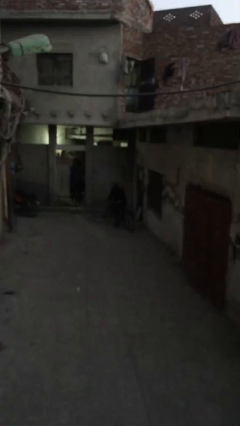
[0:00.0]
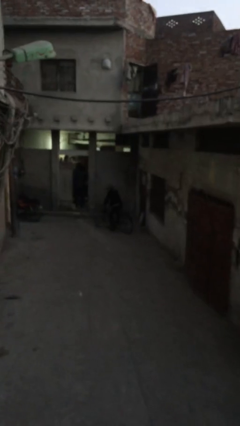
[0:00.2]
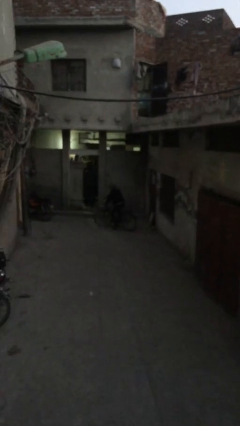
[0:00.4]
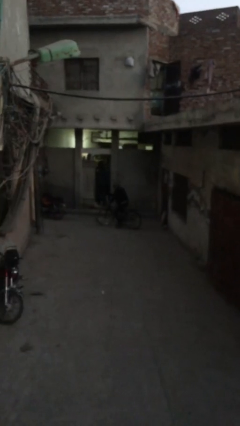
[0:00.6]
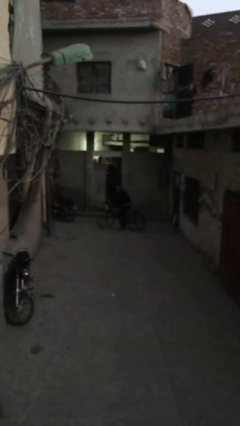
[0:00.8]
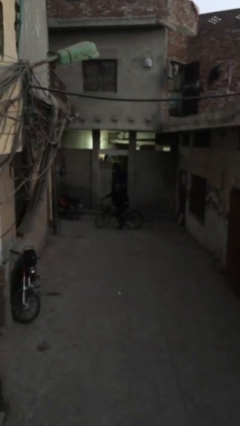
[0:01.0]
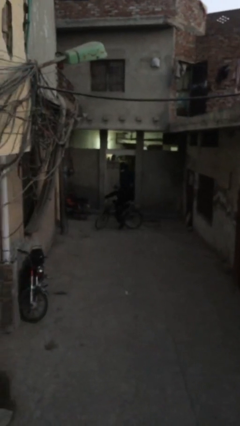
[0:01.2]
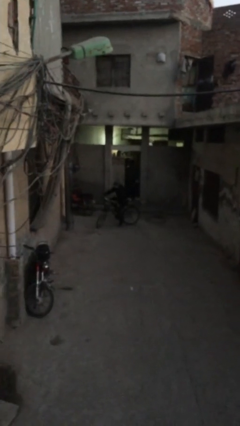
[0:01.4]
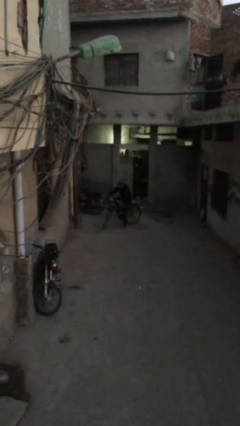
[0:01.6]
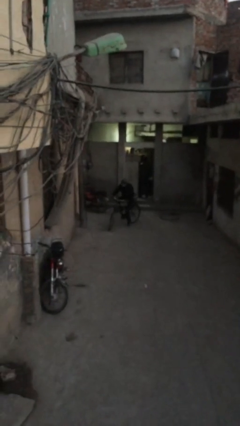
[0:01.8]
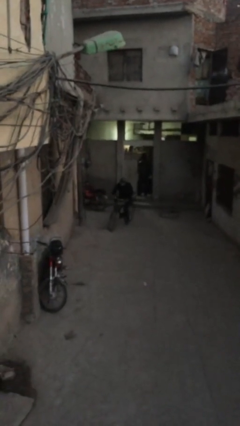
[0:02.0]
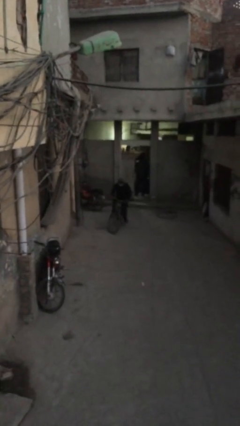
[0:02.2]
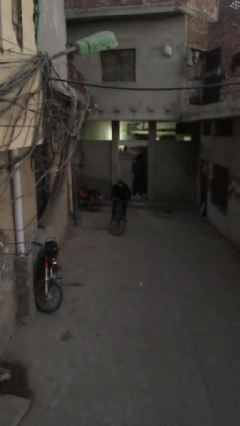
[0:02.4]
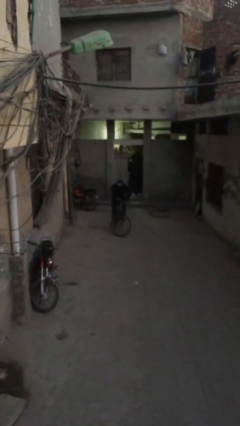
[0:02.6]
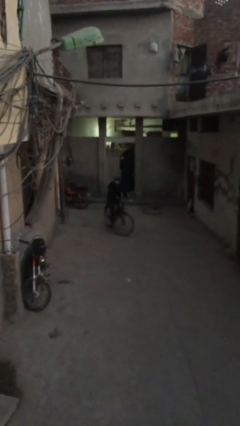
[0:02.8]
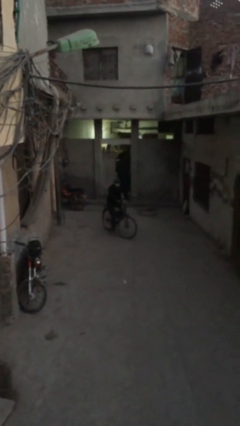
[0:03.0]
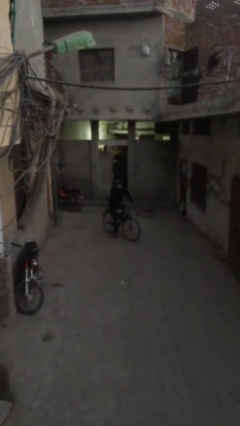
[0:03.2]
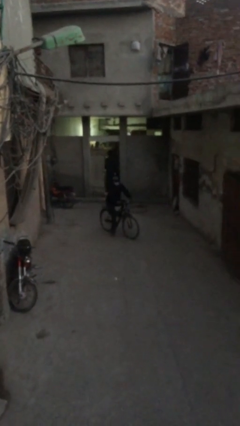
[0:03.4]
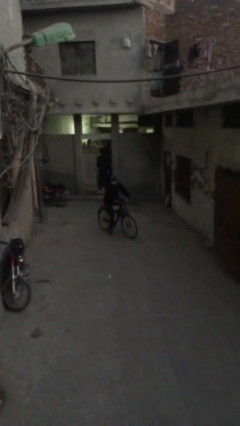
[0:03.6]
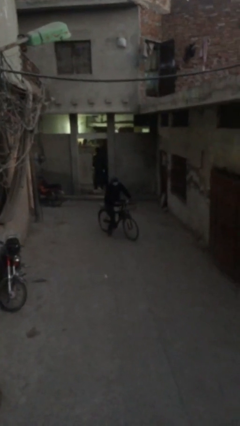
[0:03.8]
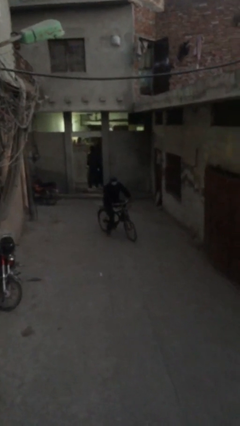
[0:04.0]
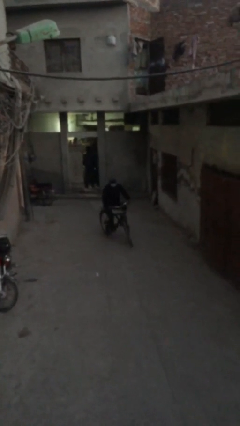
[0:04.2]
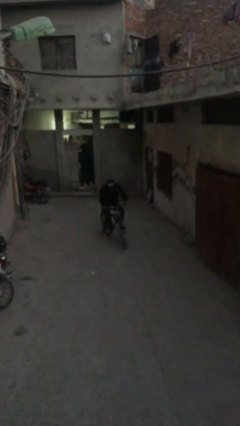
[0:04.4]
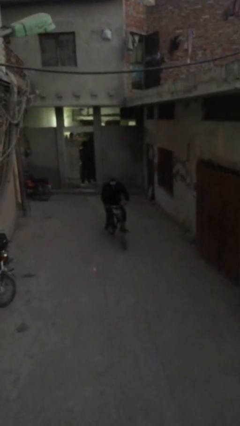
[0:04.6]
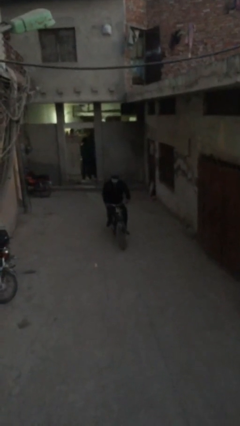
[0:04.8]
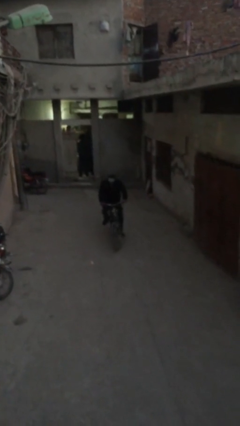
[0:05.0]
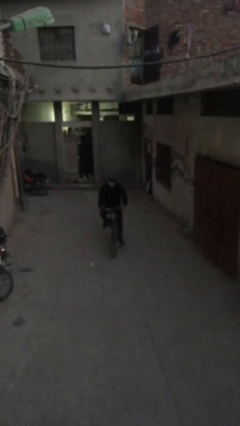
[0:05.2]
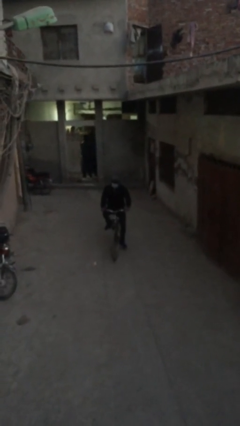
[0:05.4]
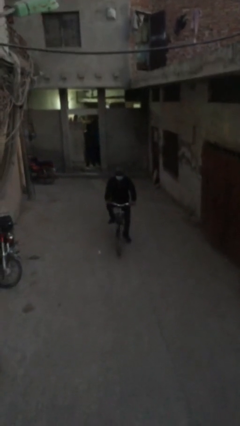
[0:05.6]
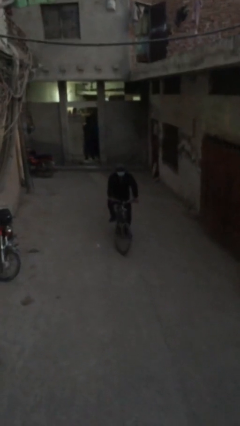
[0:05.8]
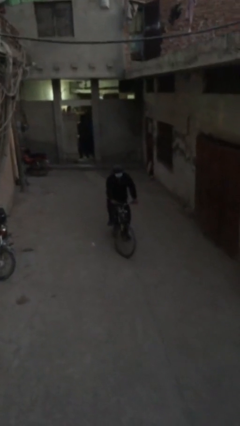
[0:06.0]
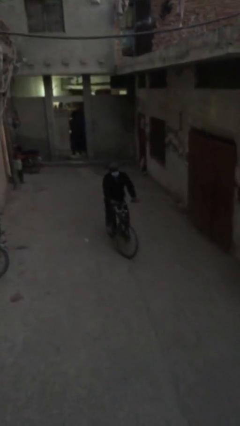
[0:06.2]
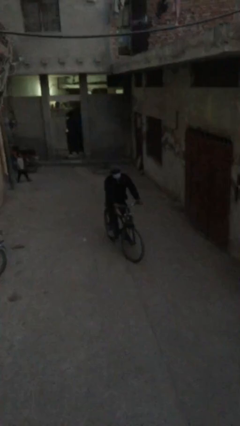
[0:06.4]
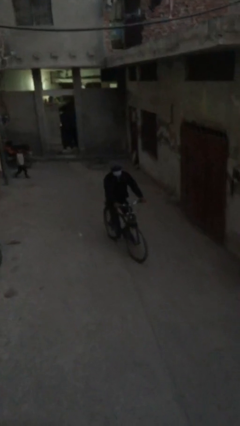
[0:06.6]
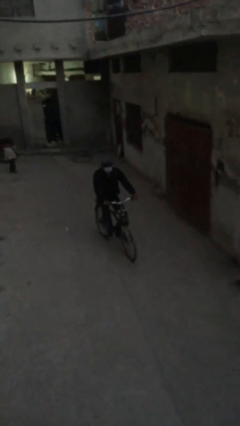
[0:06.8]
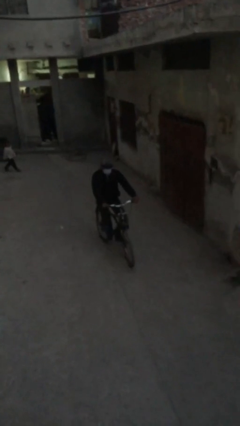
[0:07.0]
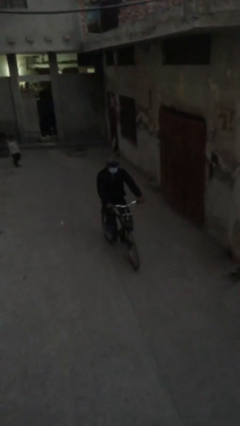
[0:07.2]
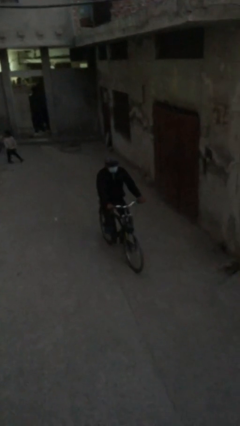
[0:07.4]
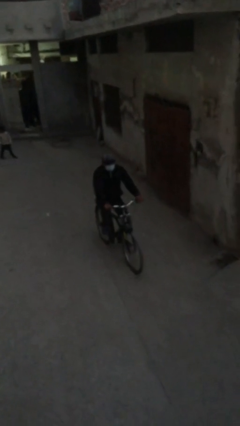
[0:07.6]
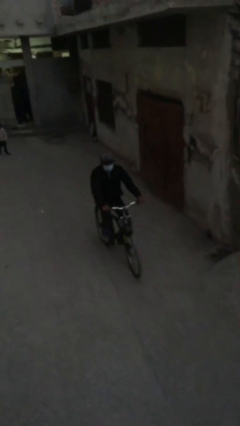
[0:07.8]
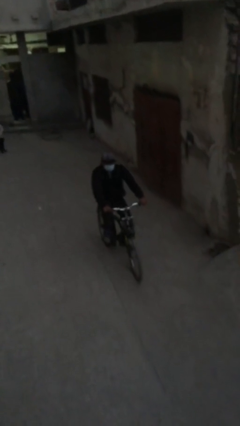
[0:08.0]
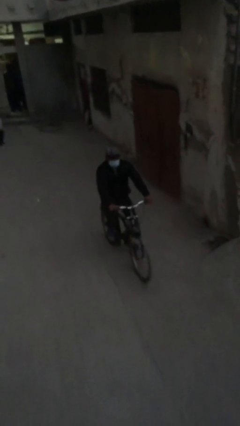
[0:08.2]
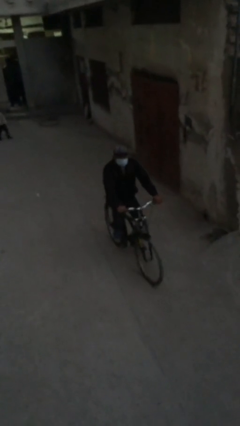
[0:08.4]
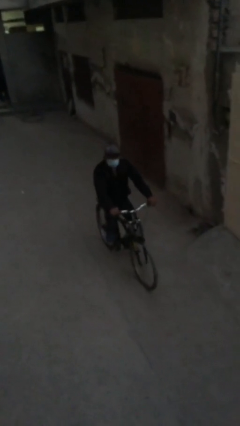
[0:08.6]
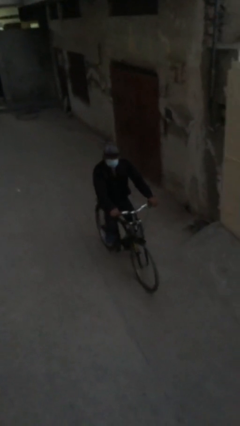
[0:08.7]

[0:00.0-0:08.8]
person rides bicycle

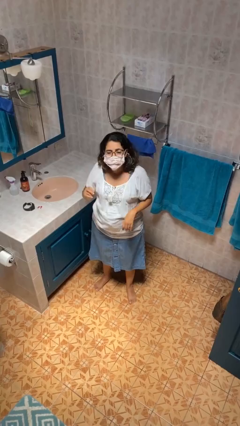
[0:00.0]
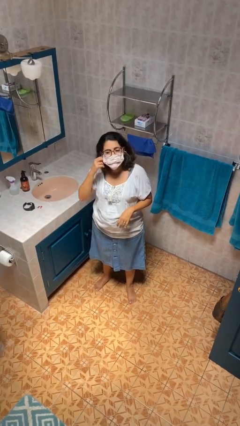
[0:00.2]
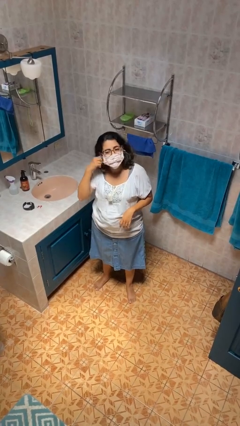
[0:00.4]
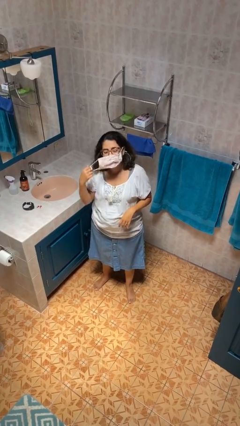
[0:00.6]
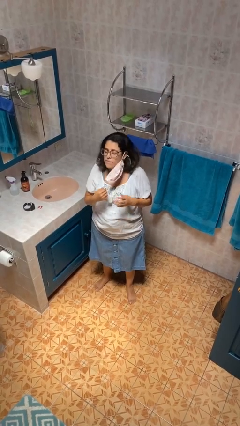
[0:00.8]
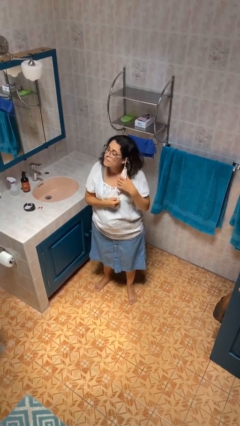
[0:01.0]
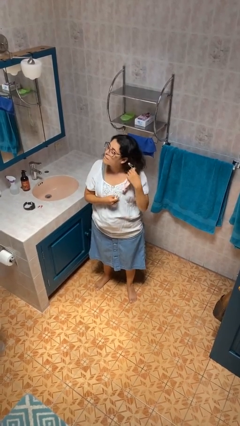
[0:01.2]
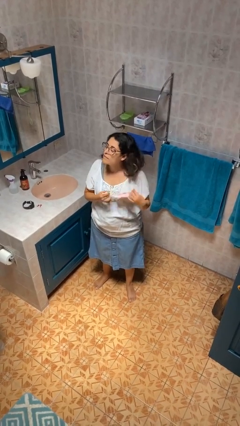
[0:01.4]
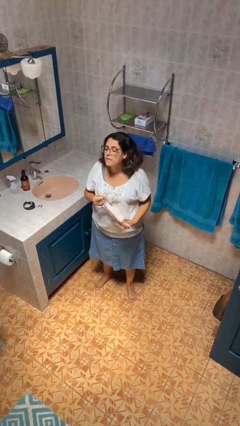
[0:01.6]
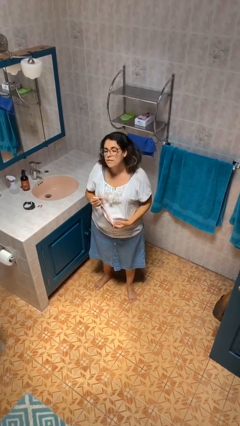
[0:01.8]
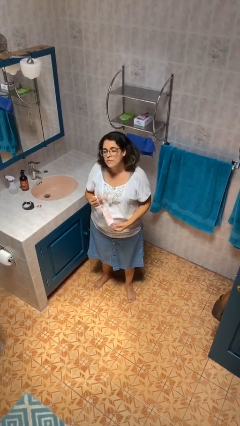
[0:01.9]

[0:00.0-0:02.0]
person takes off facemask

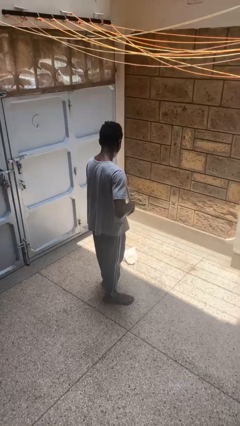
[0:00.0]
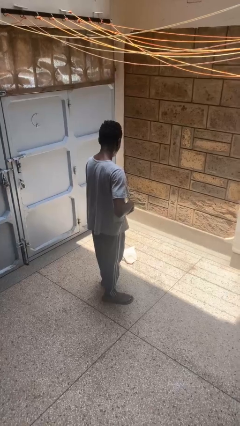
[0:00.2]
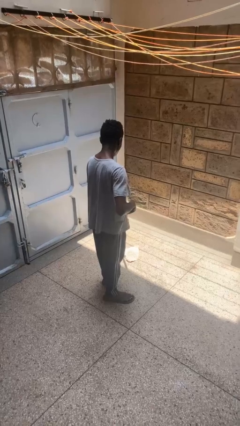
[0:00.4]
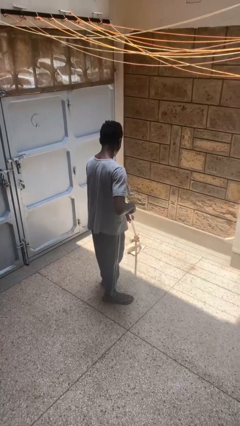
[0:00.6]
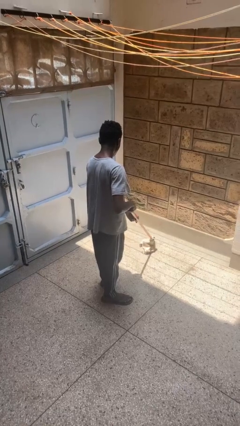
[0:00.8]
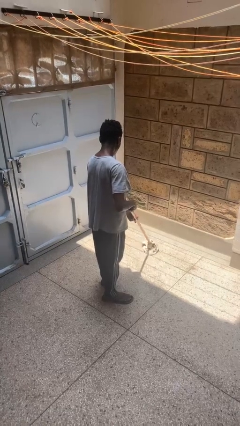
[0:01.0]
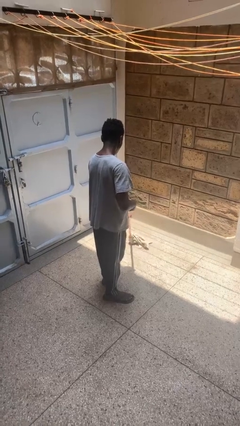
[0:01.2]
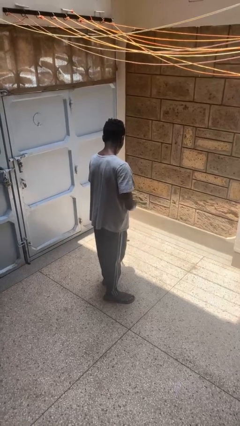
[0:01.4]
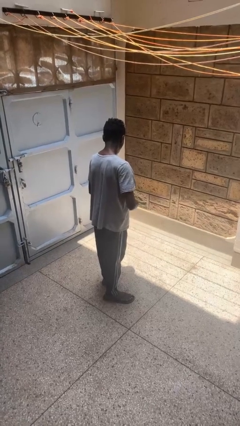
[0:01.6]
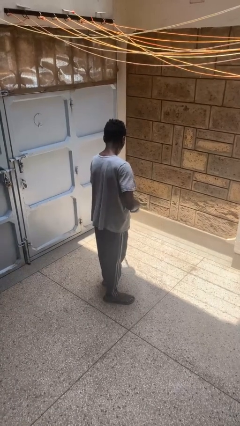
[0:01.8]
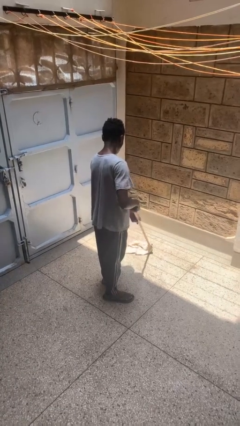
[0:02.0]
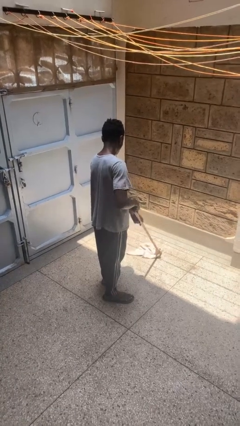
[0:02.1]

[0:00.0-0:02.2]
person mops

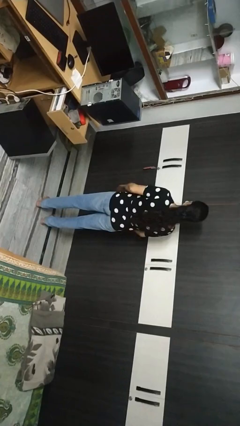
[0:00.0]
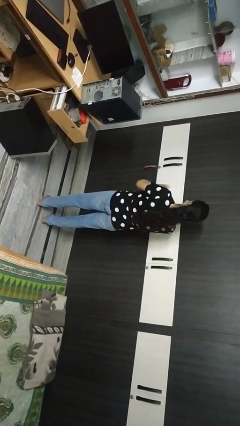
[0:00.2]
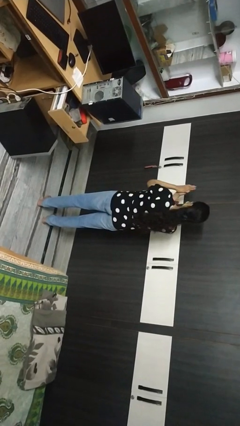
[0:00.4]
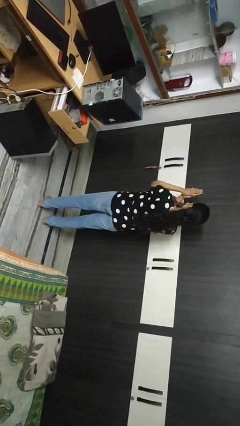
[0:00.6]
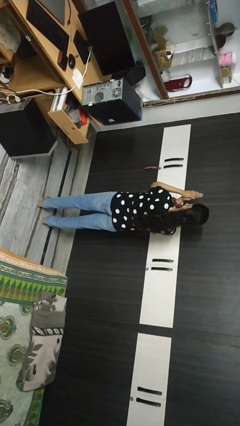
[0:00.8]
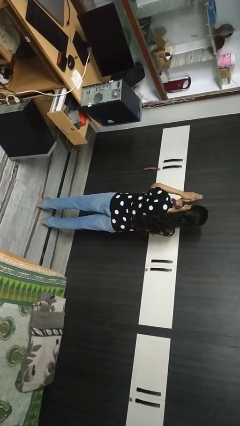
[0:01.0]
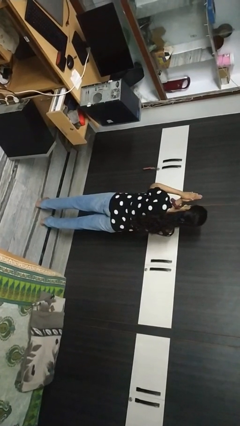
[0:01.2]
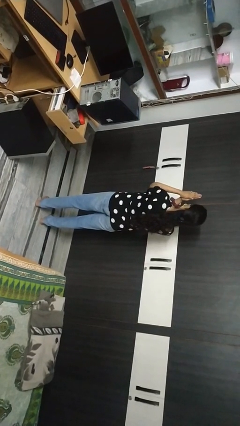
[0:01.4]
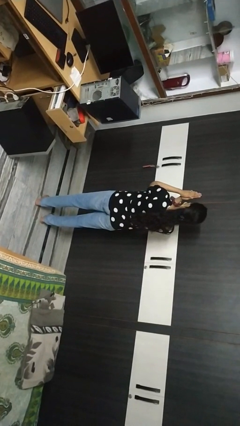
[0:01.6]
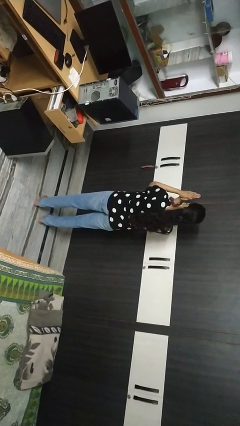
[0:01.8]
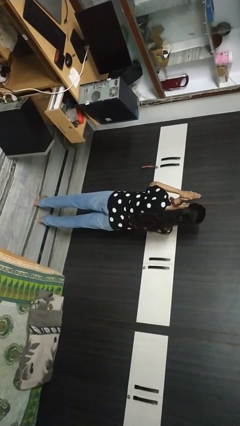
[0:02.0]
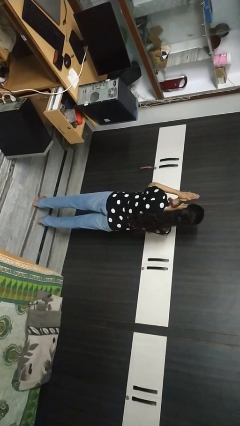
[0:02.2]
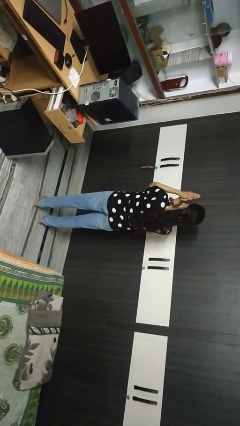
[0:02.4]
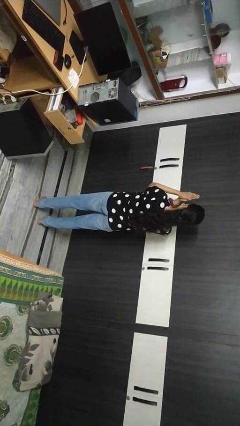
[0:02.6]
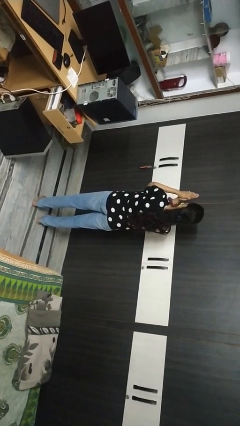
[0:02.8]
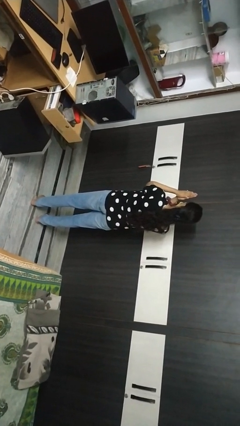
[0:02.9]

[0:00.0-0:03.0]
person prays

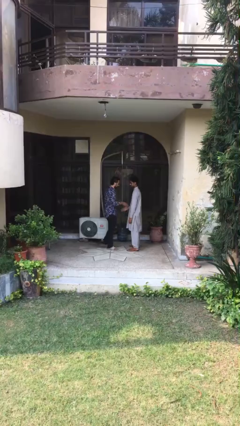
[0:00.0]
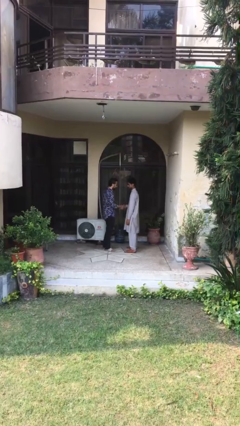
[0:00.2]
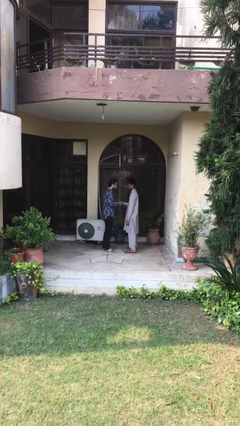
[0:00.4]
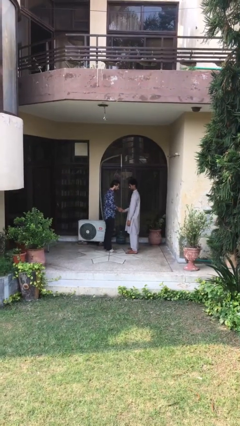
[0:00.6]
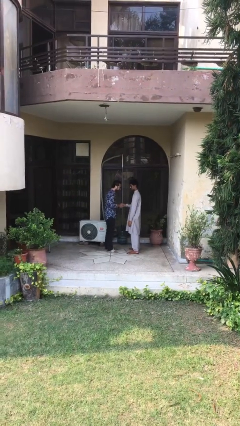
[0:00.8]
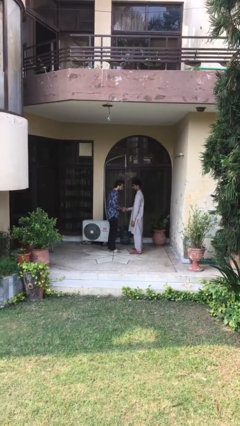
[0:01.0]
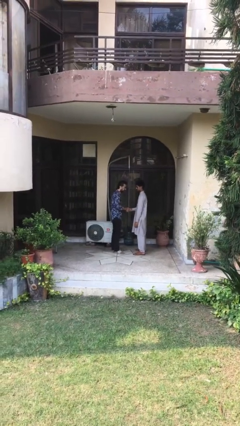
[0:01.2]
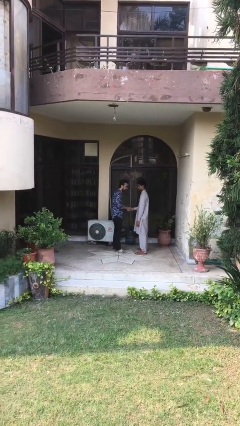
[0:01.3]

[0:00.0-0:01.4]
person shakes hand
